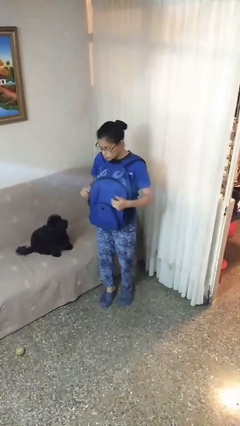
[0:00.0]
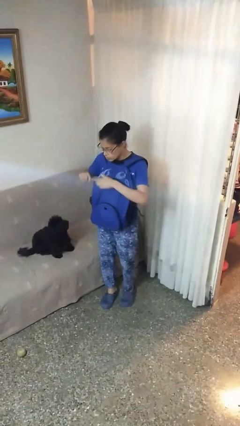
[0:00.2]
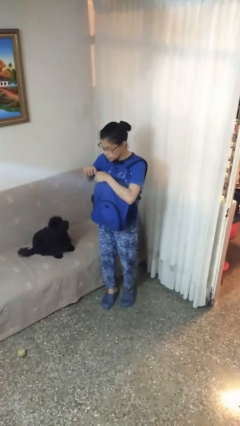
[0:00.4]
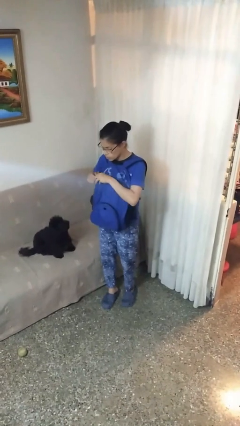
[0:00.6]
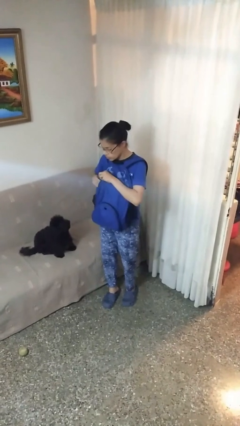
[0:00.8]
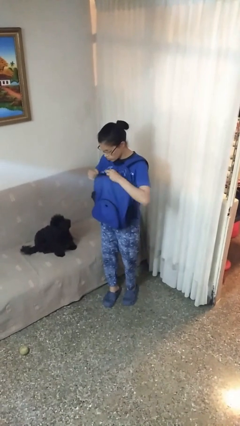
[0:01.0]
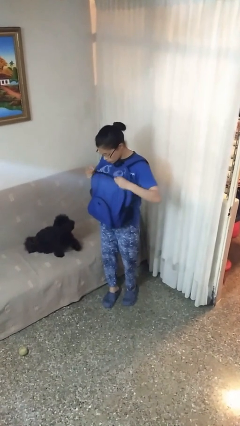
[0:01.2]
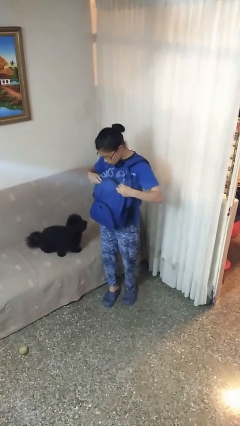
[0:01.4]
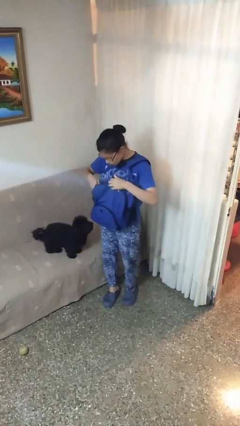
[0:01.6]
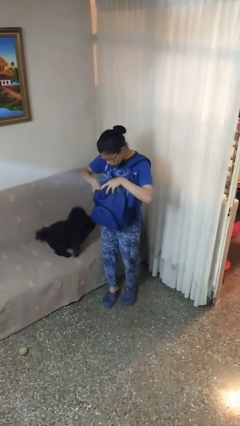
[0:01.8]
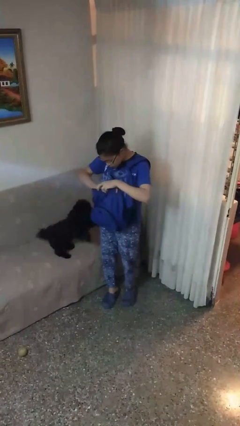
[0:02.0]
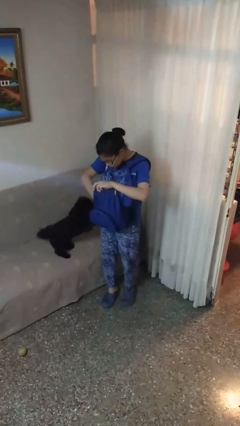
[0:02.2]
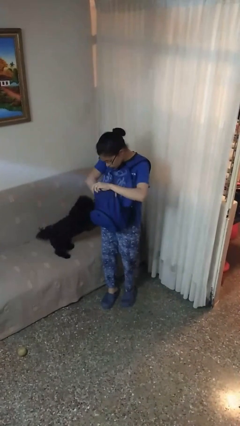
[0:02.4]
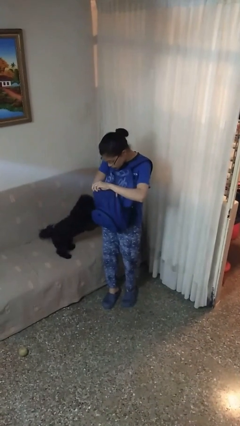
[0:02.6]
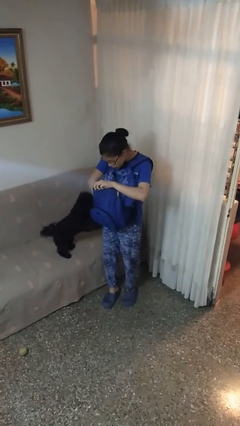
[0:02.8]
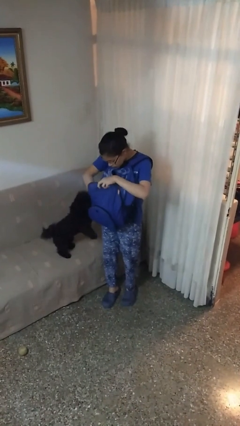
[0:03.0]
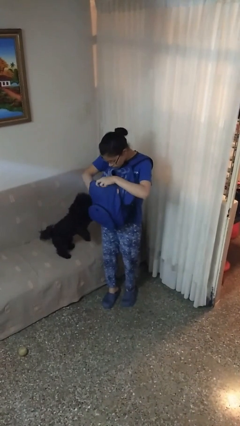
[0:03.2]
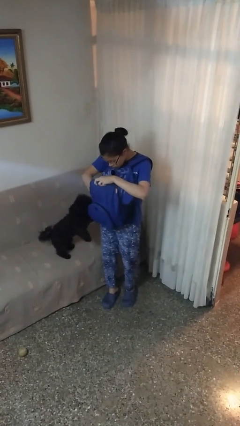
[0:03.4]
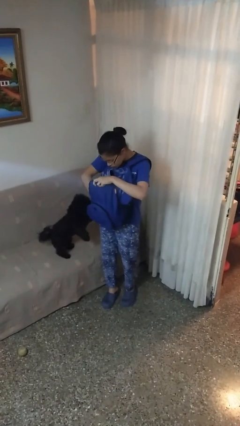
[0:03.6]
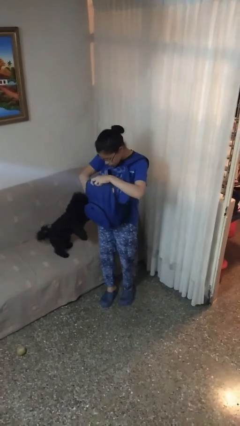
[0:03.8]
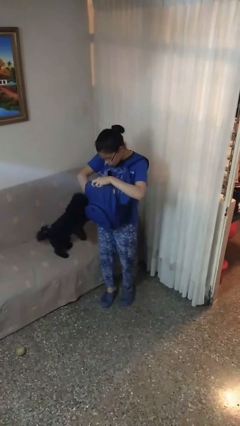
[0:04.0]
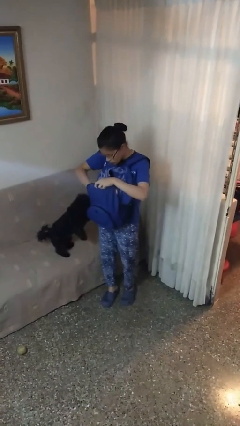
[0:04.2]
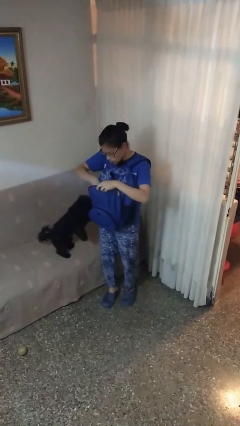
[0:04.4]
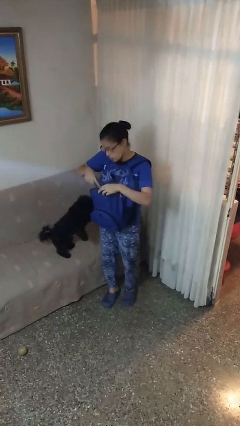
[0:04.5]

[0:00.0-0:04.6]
person searches in backpack

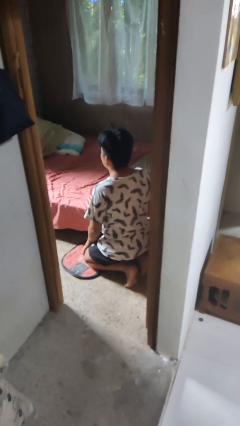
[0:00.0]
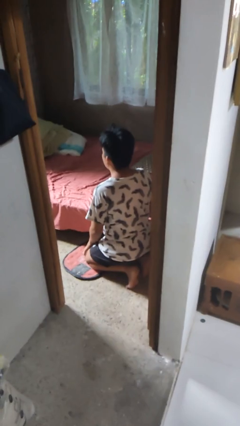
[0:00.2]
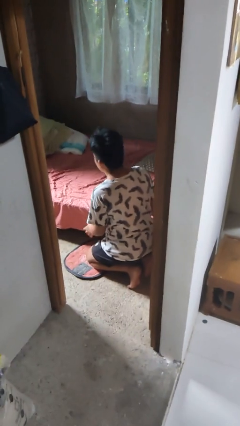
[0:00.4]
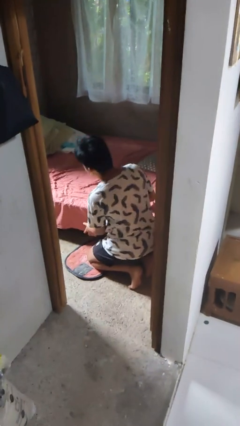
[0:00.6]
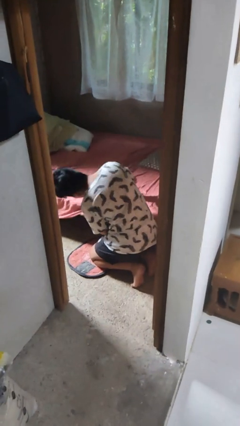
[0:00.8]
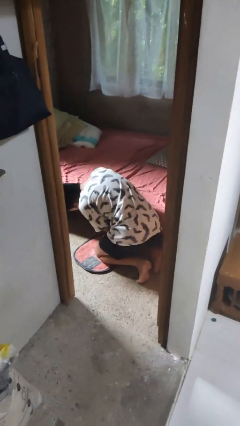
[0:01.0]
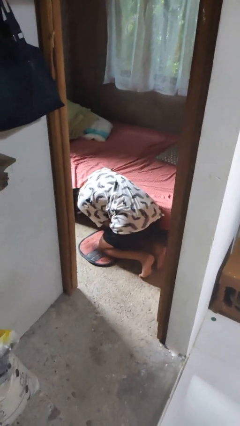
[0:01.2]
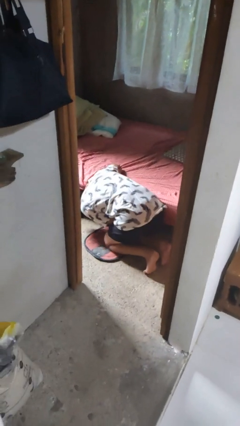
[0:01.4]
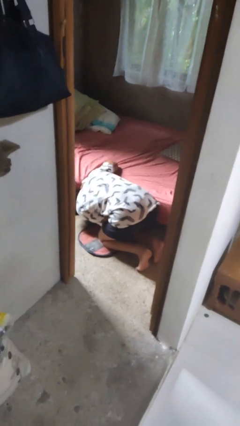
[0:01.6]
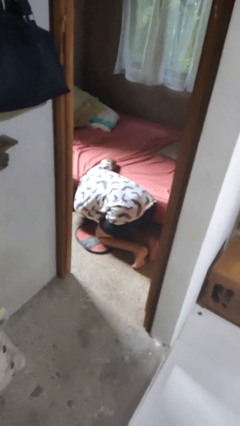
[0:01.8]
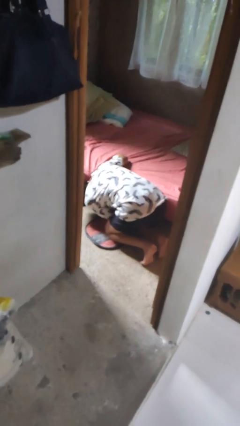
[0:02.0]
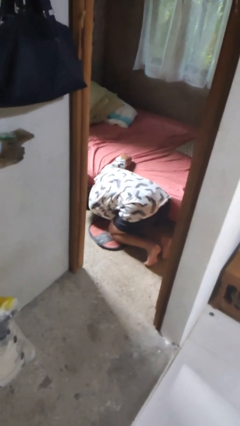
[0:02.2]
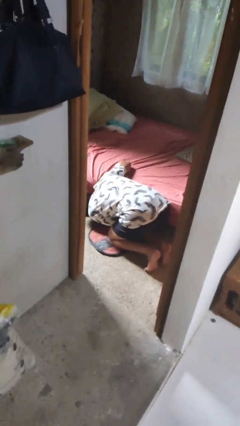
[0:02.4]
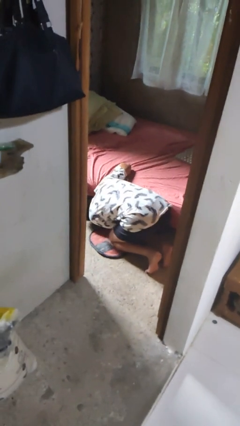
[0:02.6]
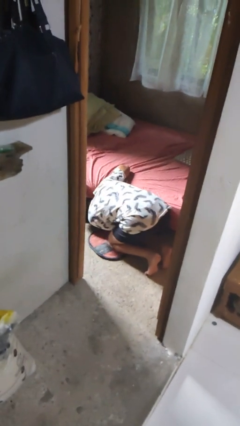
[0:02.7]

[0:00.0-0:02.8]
person searches under bed

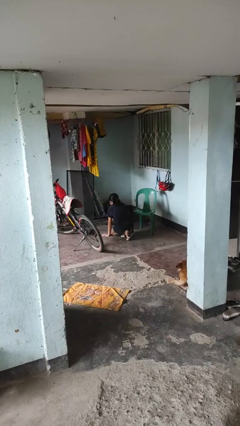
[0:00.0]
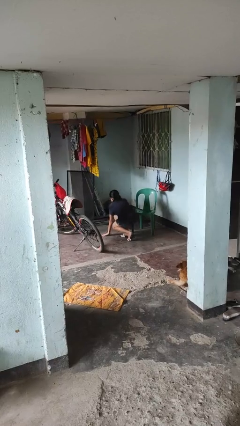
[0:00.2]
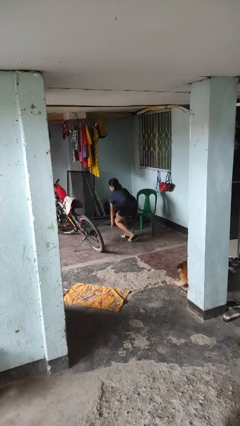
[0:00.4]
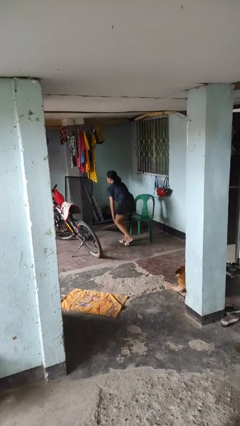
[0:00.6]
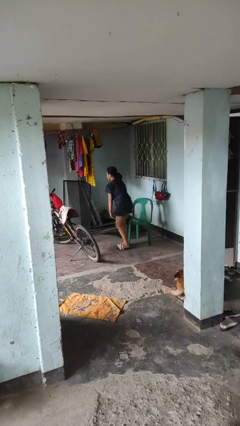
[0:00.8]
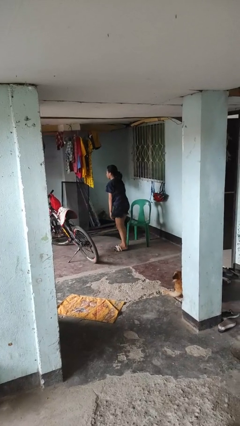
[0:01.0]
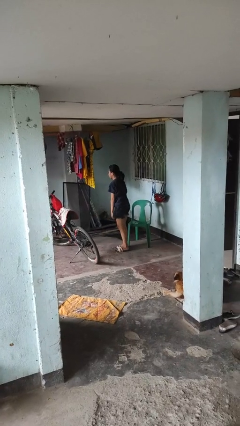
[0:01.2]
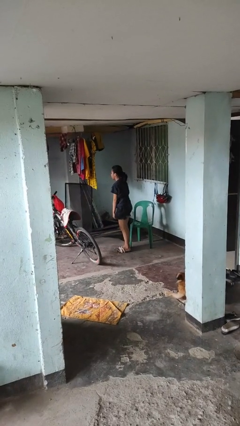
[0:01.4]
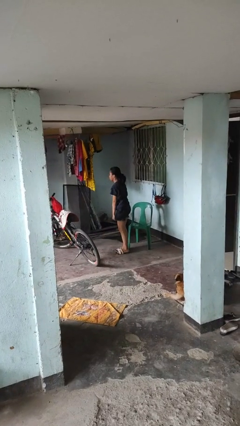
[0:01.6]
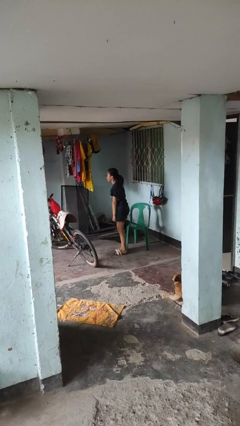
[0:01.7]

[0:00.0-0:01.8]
person stands up from floor

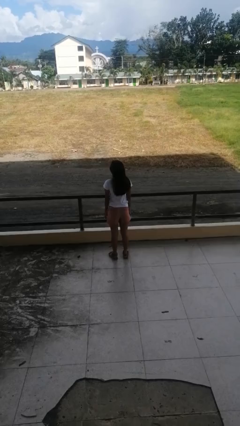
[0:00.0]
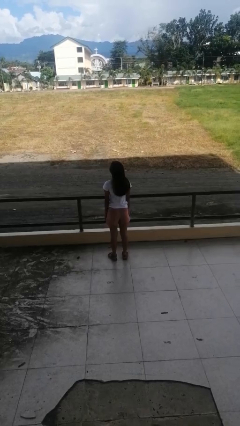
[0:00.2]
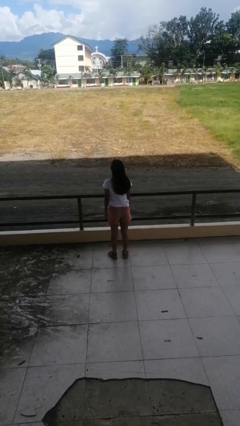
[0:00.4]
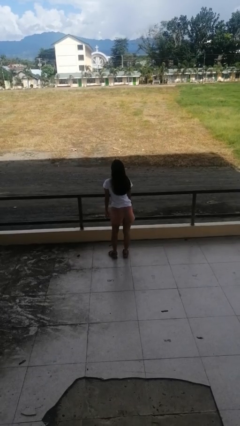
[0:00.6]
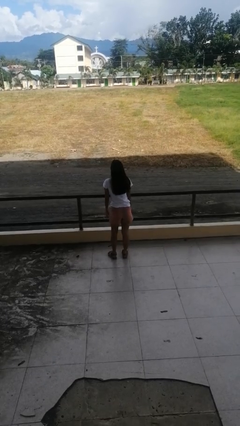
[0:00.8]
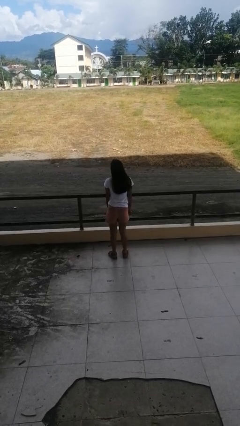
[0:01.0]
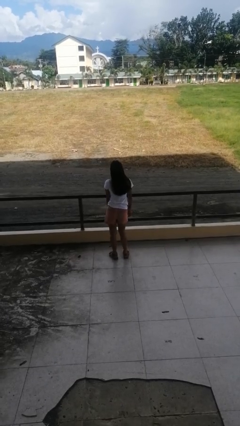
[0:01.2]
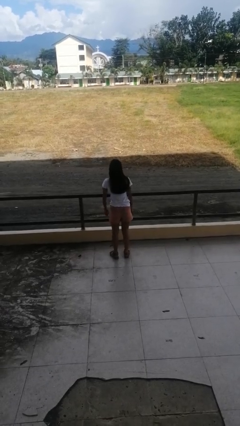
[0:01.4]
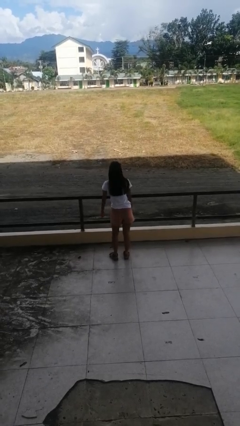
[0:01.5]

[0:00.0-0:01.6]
person wiggles hips

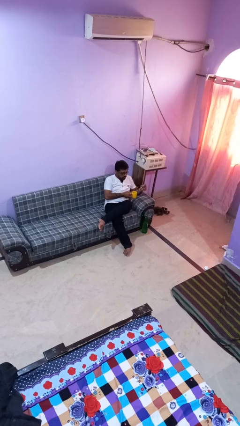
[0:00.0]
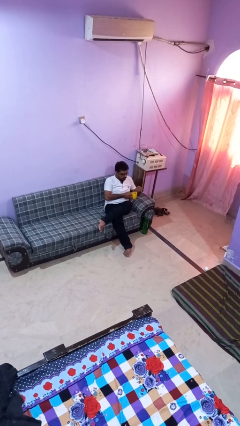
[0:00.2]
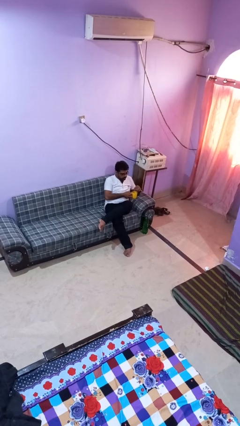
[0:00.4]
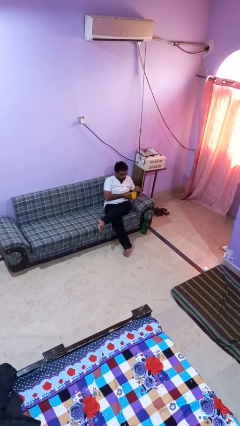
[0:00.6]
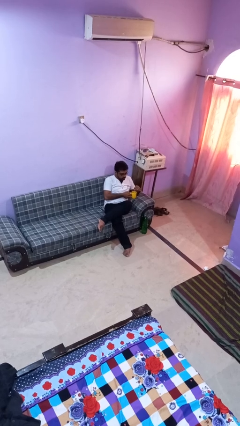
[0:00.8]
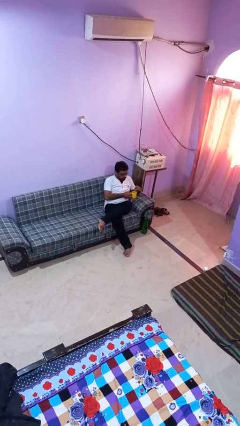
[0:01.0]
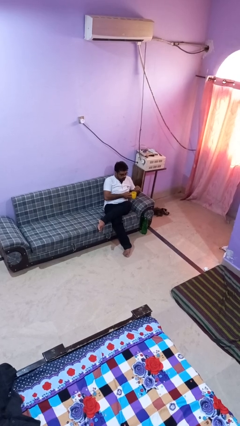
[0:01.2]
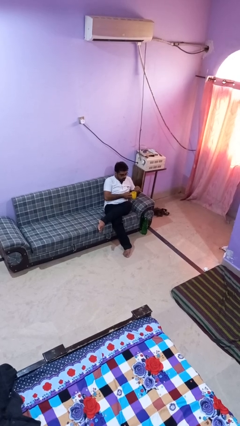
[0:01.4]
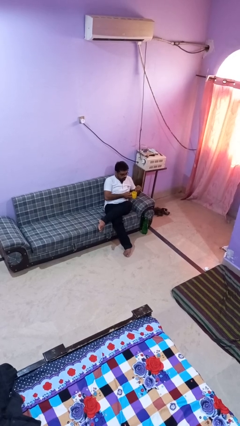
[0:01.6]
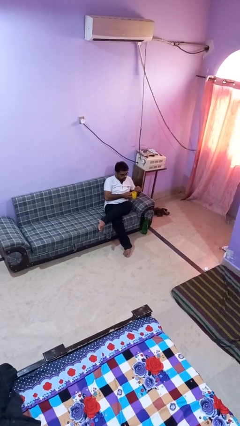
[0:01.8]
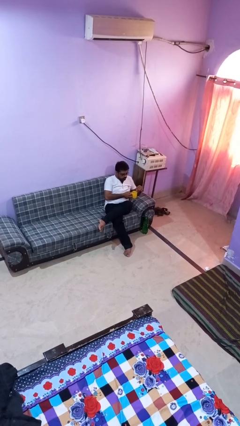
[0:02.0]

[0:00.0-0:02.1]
person stirs mug

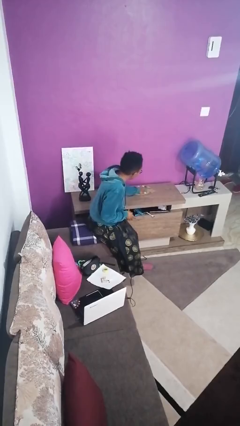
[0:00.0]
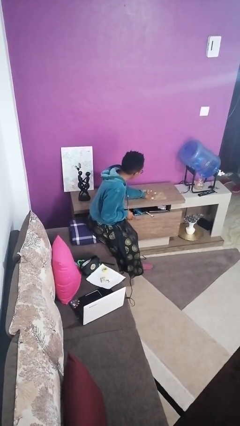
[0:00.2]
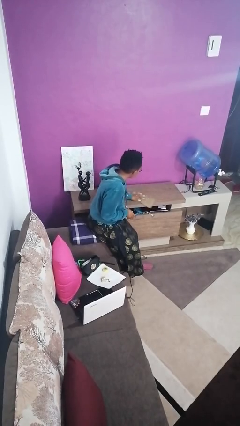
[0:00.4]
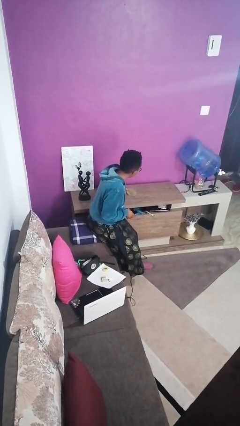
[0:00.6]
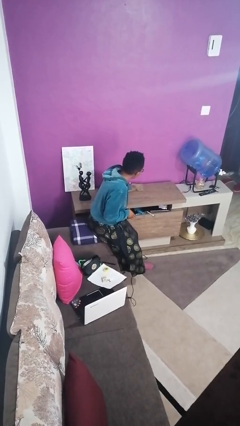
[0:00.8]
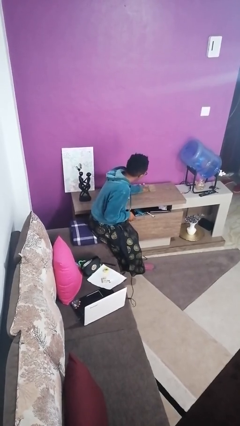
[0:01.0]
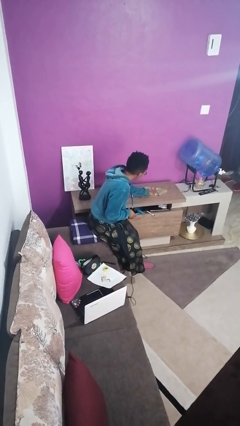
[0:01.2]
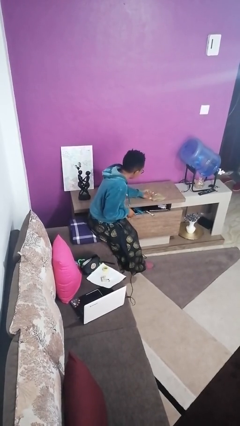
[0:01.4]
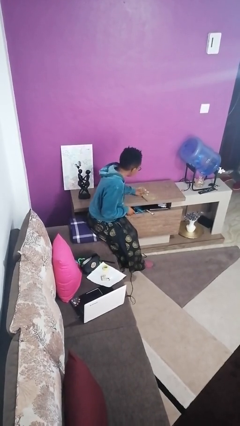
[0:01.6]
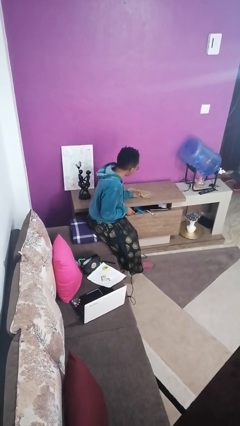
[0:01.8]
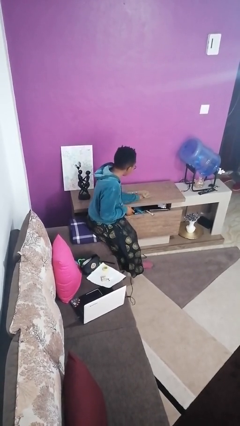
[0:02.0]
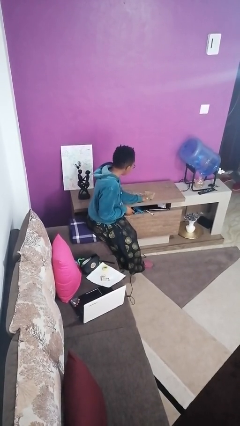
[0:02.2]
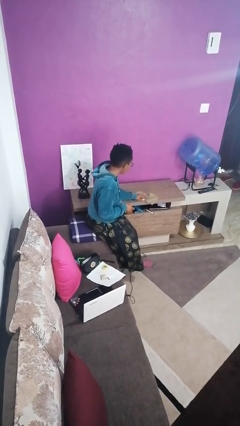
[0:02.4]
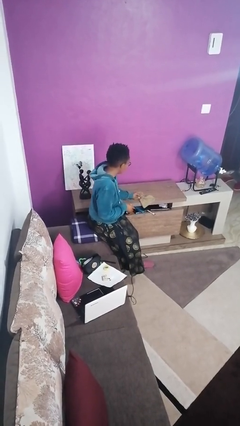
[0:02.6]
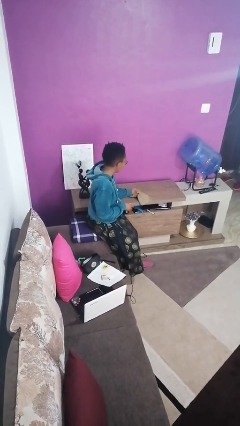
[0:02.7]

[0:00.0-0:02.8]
person cleans table with rag

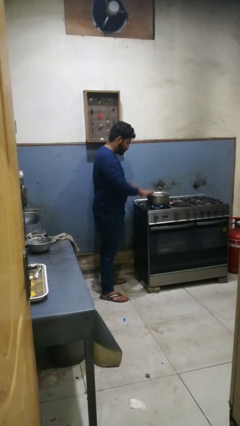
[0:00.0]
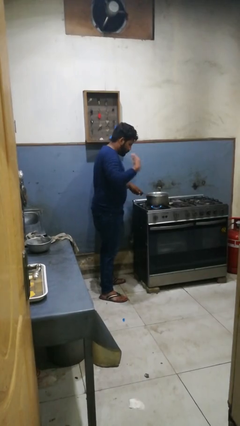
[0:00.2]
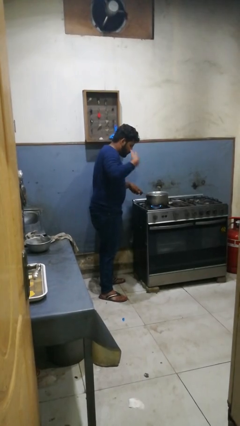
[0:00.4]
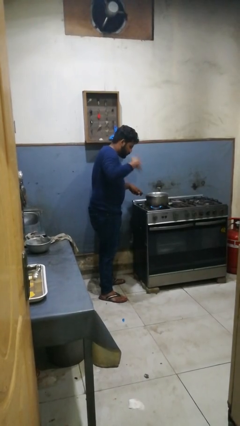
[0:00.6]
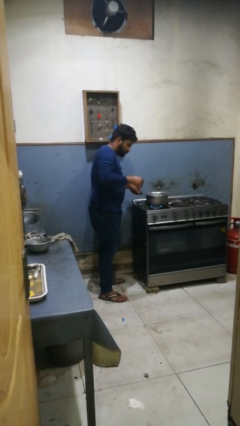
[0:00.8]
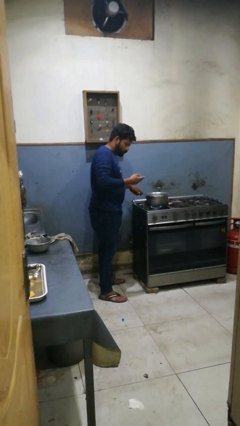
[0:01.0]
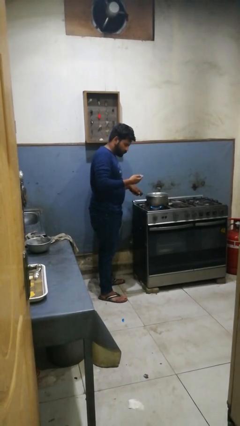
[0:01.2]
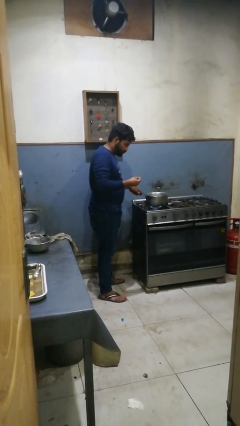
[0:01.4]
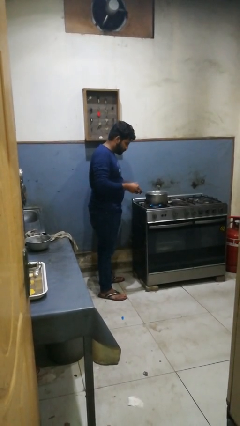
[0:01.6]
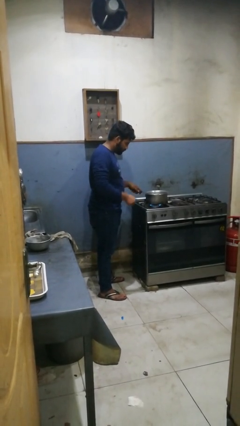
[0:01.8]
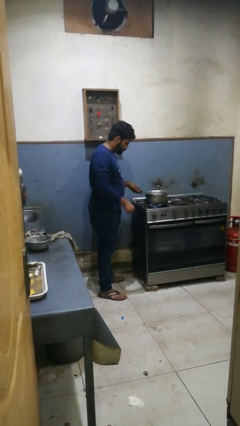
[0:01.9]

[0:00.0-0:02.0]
person burns hand
